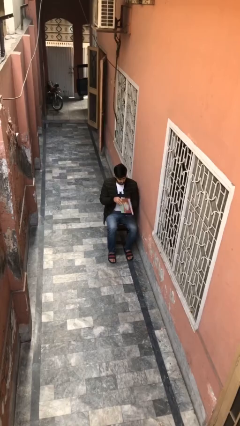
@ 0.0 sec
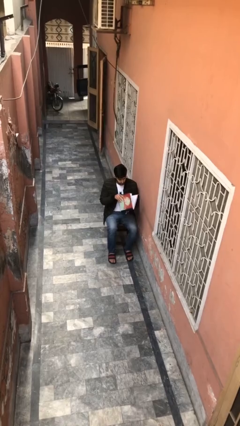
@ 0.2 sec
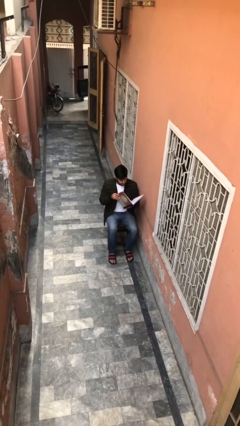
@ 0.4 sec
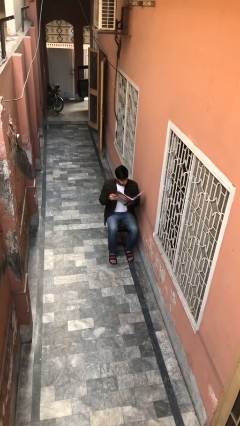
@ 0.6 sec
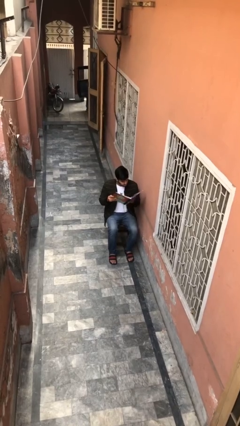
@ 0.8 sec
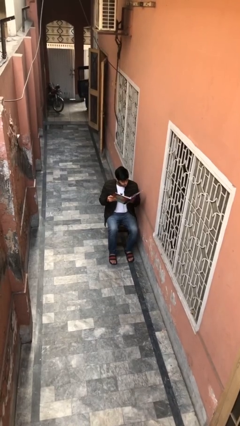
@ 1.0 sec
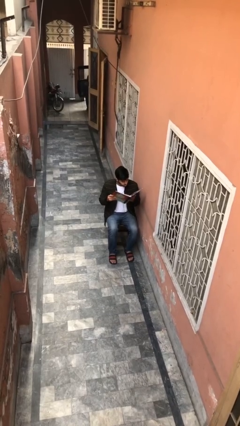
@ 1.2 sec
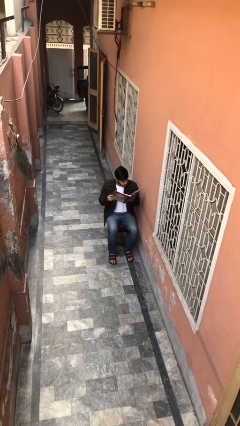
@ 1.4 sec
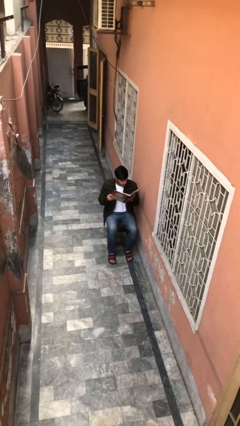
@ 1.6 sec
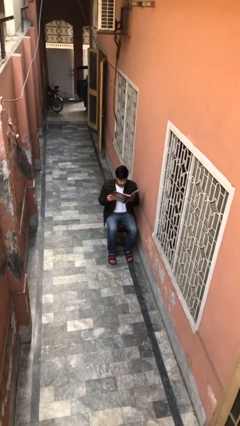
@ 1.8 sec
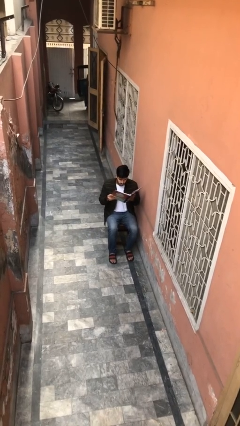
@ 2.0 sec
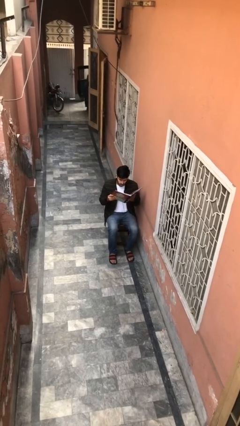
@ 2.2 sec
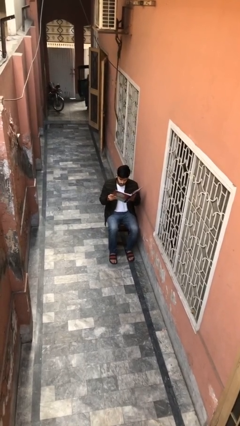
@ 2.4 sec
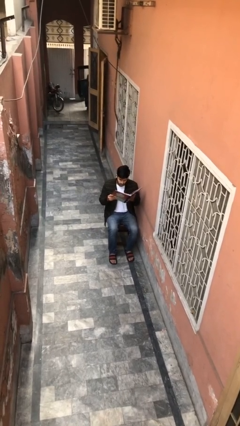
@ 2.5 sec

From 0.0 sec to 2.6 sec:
person reads document

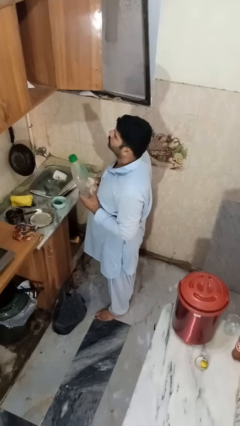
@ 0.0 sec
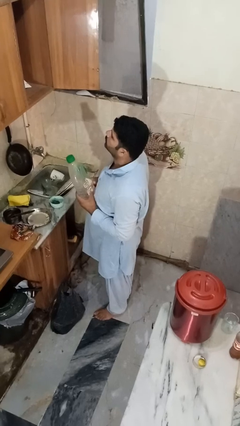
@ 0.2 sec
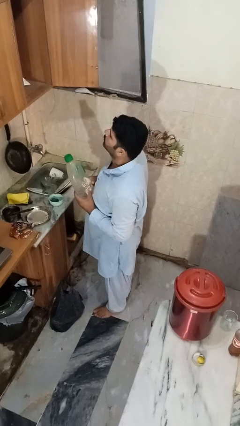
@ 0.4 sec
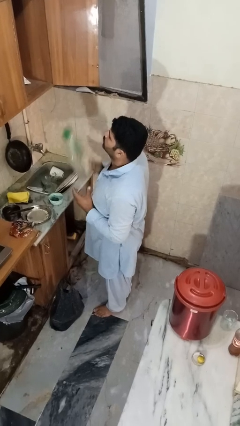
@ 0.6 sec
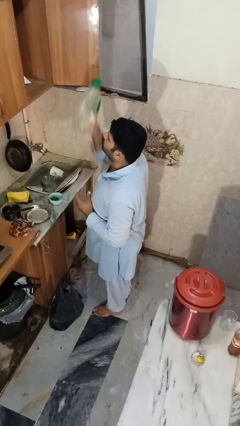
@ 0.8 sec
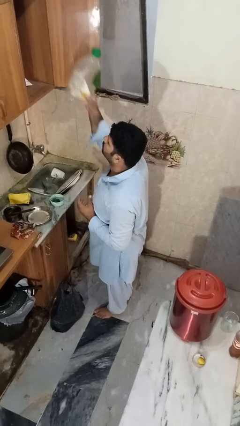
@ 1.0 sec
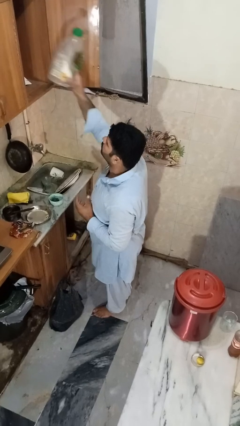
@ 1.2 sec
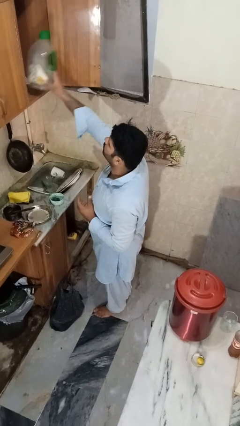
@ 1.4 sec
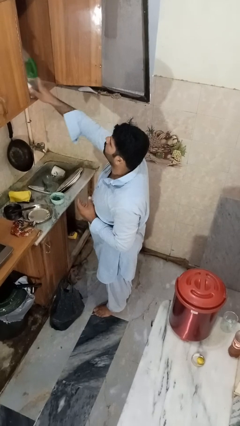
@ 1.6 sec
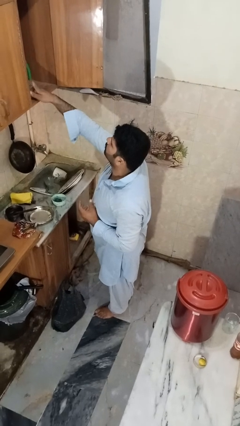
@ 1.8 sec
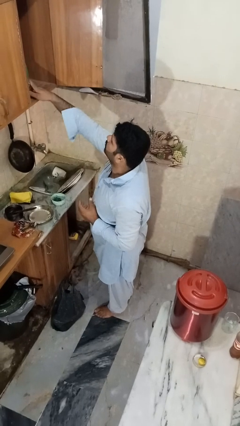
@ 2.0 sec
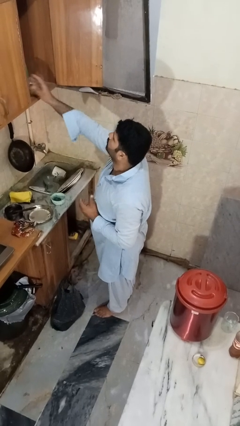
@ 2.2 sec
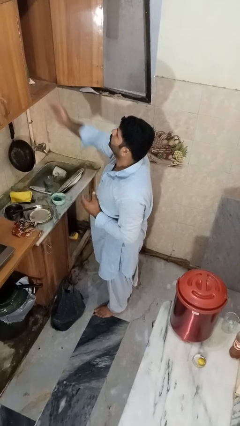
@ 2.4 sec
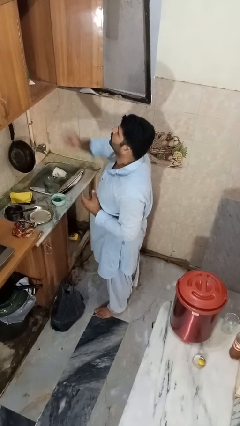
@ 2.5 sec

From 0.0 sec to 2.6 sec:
person puts object in cabinet

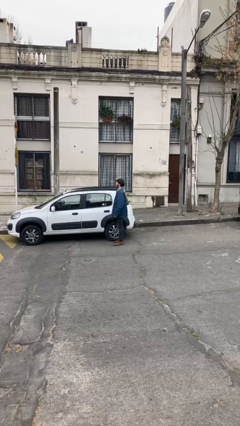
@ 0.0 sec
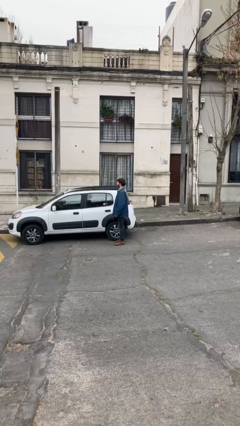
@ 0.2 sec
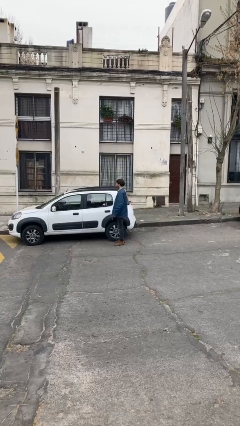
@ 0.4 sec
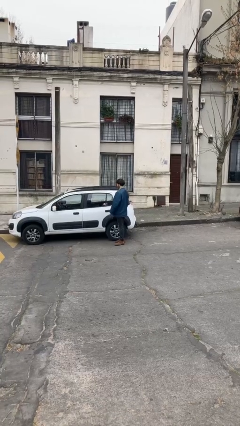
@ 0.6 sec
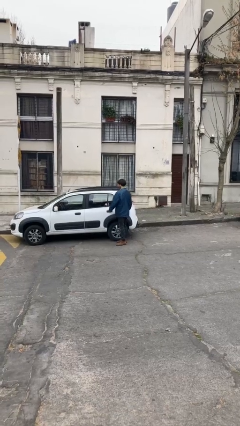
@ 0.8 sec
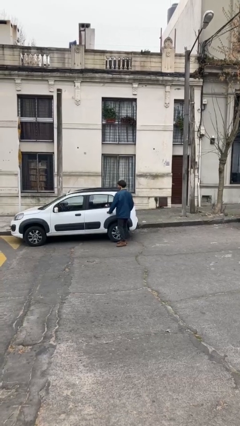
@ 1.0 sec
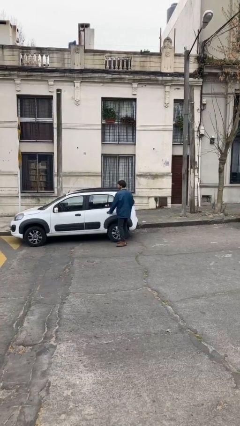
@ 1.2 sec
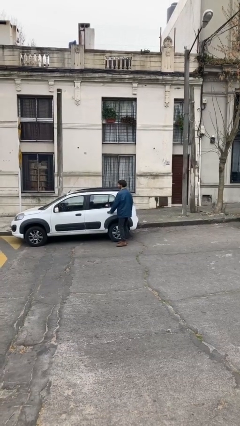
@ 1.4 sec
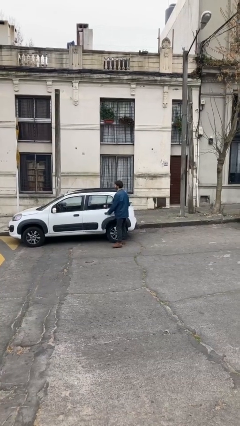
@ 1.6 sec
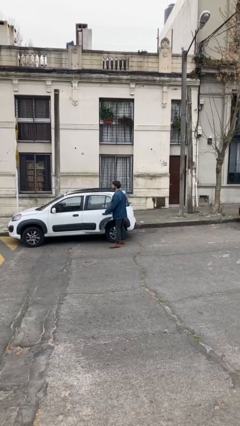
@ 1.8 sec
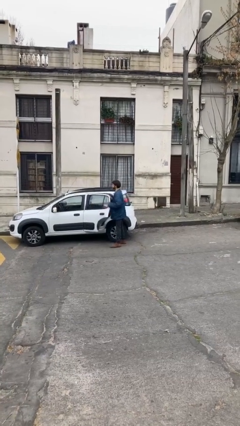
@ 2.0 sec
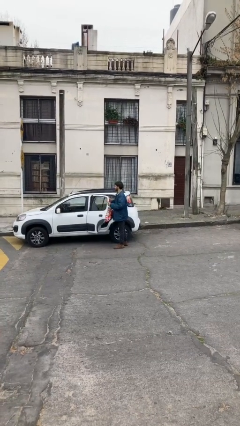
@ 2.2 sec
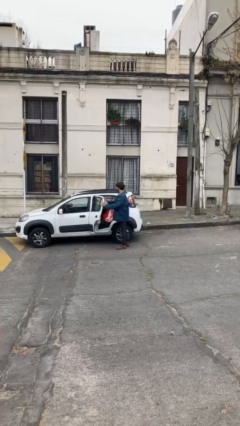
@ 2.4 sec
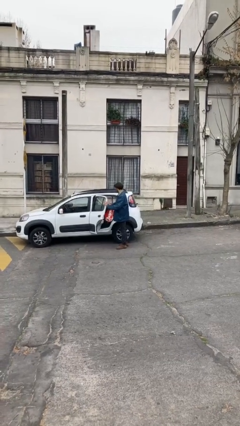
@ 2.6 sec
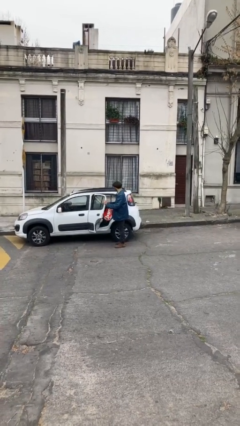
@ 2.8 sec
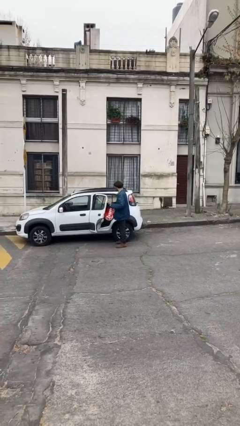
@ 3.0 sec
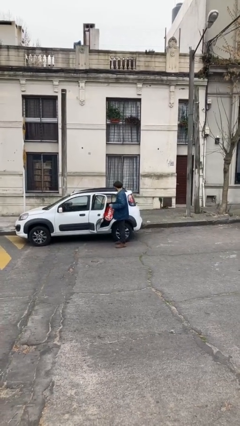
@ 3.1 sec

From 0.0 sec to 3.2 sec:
person opens car door

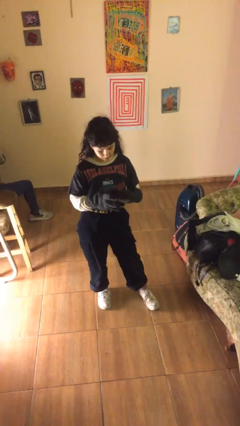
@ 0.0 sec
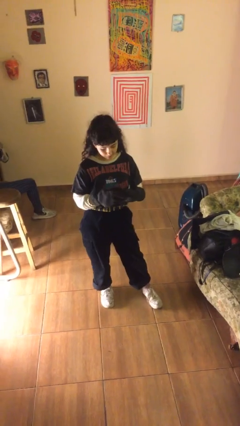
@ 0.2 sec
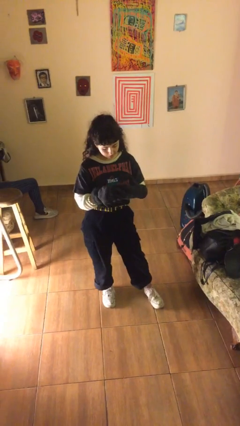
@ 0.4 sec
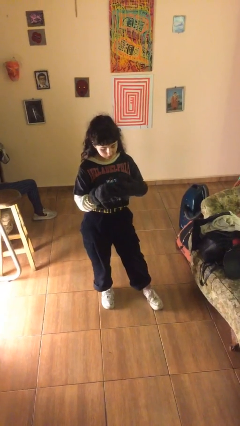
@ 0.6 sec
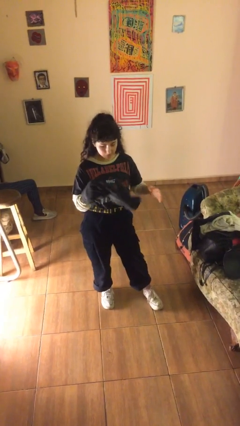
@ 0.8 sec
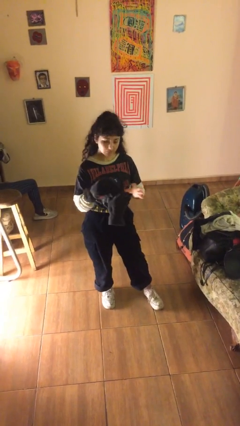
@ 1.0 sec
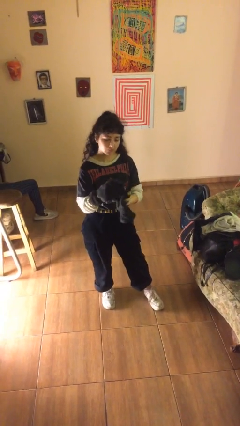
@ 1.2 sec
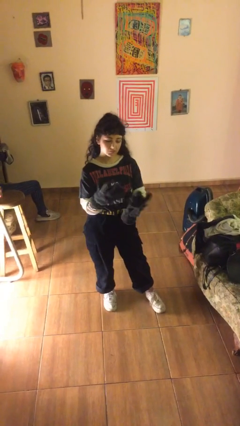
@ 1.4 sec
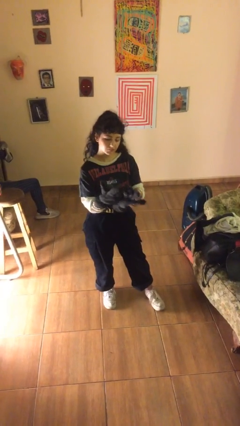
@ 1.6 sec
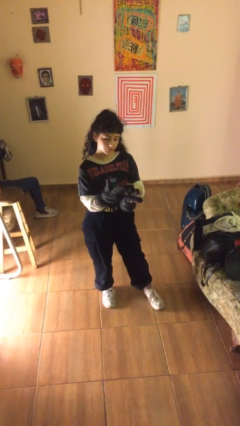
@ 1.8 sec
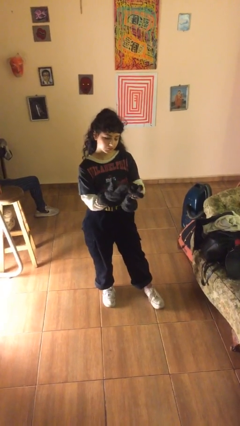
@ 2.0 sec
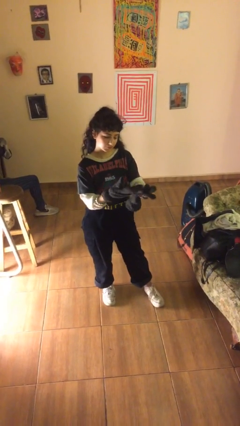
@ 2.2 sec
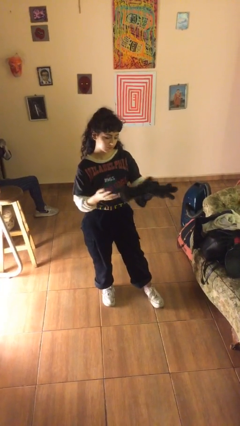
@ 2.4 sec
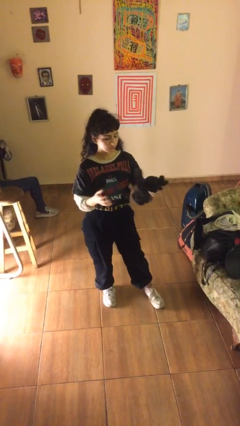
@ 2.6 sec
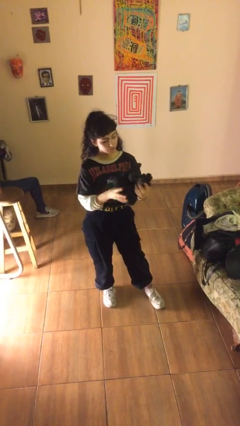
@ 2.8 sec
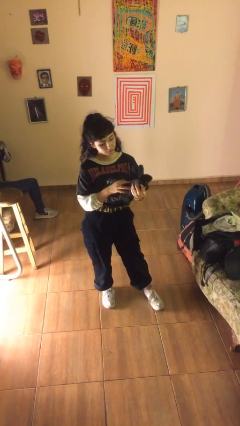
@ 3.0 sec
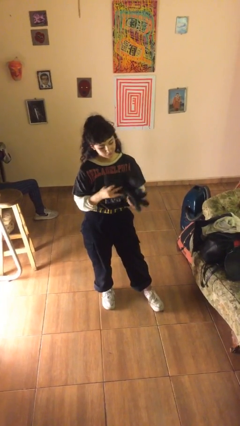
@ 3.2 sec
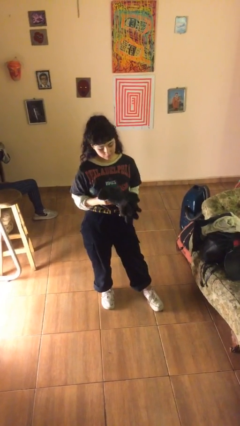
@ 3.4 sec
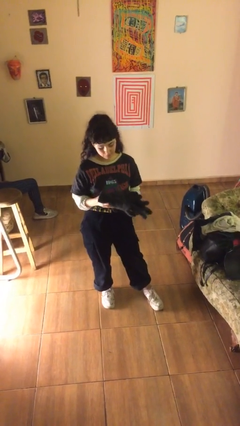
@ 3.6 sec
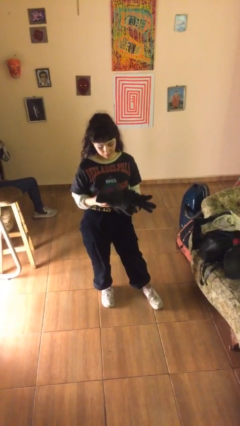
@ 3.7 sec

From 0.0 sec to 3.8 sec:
person takes off gloves

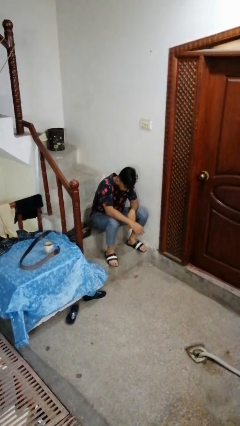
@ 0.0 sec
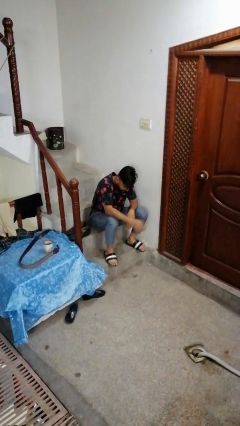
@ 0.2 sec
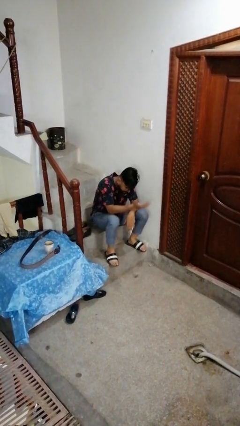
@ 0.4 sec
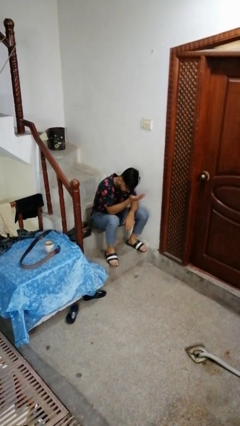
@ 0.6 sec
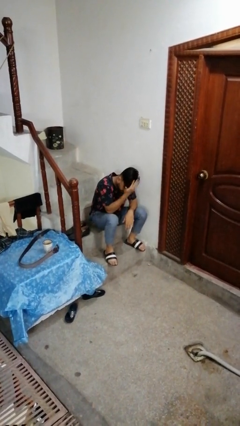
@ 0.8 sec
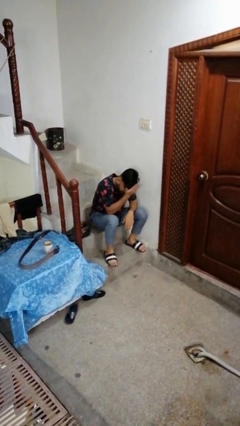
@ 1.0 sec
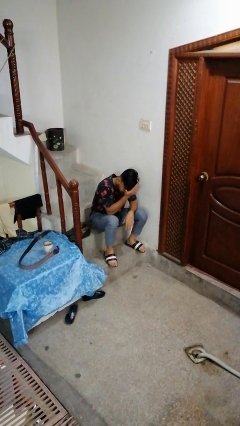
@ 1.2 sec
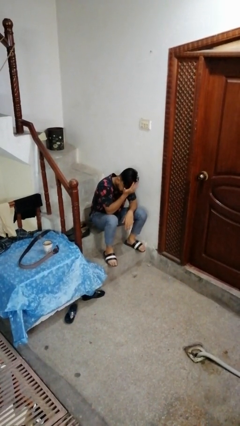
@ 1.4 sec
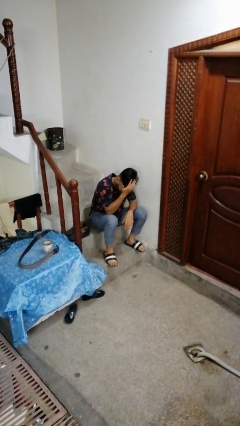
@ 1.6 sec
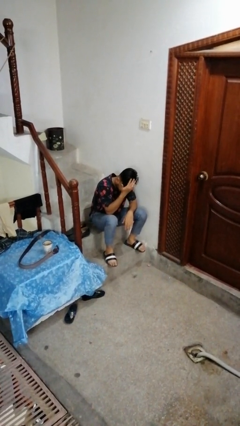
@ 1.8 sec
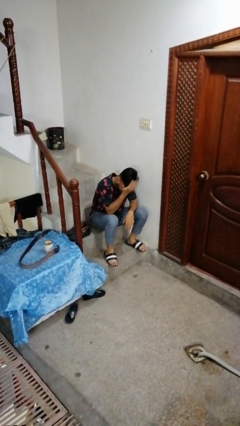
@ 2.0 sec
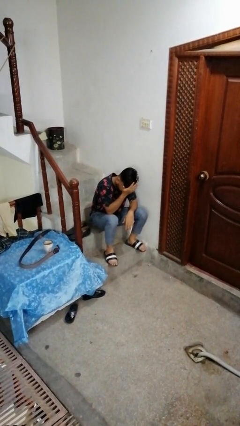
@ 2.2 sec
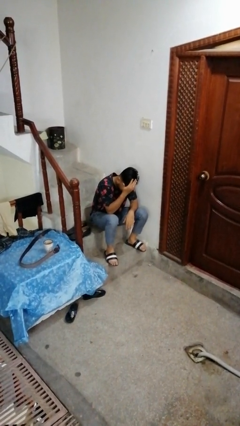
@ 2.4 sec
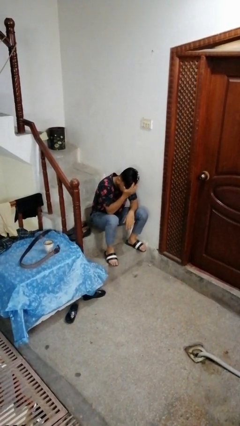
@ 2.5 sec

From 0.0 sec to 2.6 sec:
person strokes hair

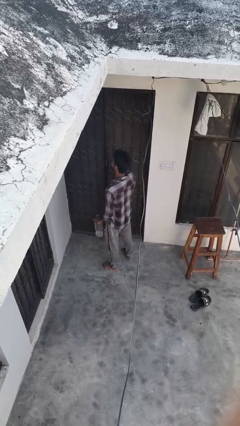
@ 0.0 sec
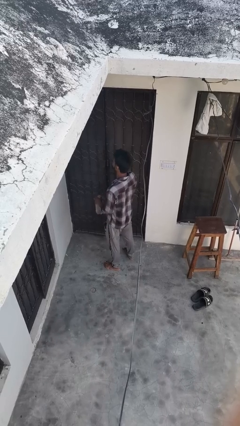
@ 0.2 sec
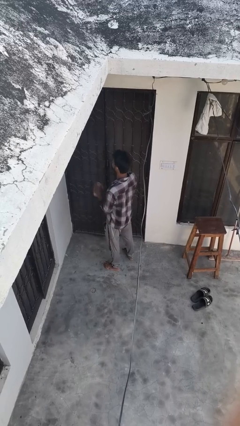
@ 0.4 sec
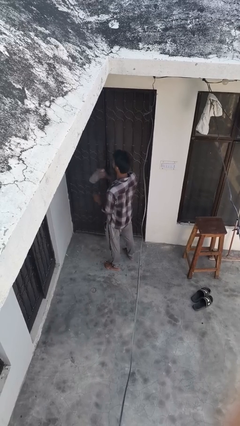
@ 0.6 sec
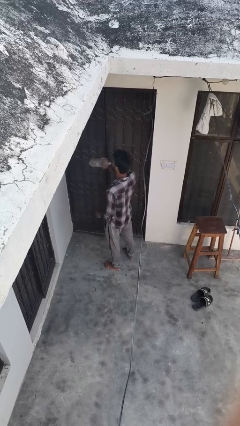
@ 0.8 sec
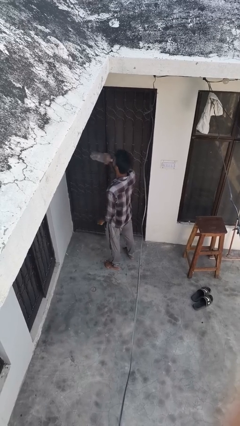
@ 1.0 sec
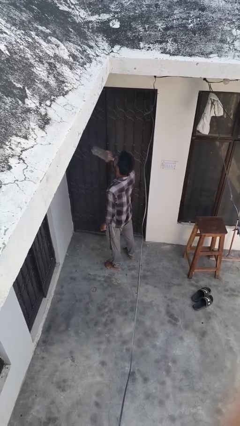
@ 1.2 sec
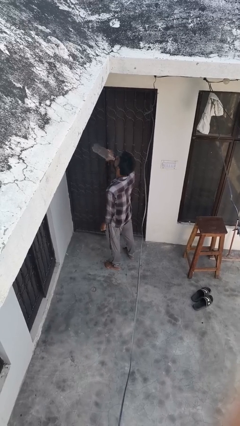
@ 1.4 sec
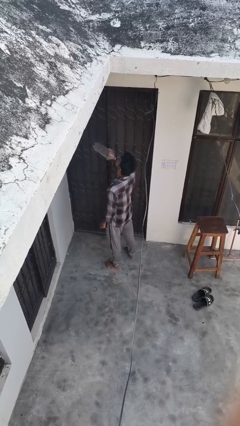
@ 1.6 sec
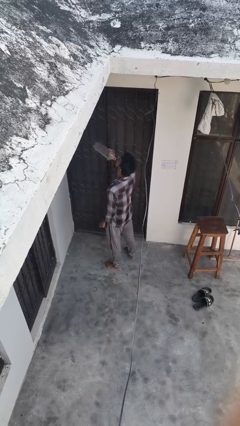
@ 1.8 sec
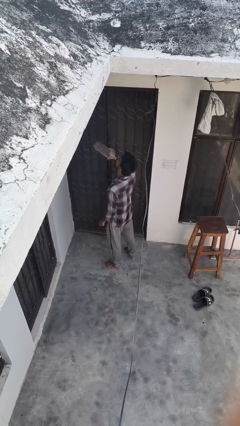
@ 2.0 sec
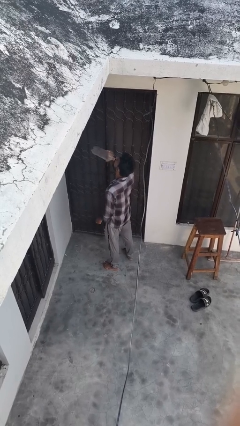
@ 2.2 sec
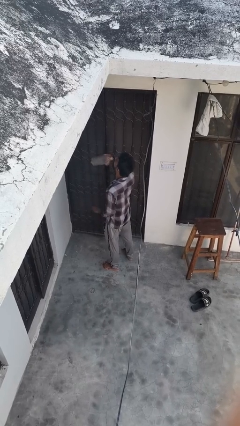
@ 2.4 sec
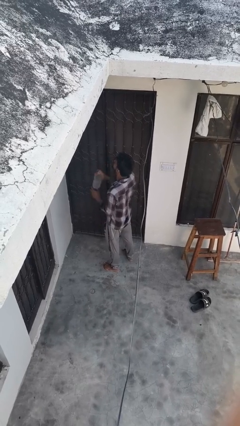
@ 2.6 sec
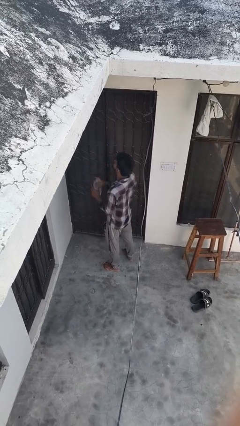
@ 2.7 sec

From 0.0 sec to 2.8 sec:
person drinks from bottle
